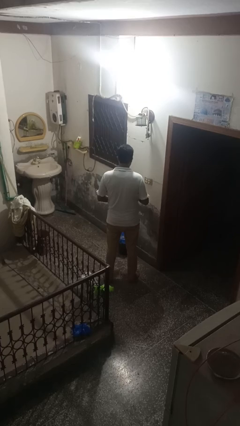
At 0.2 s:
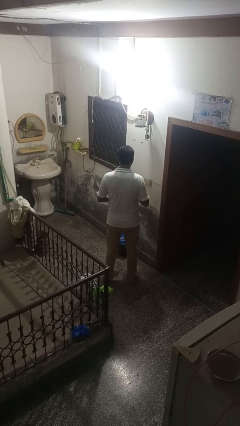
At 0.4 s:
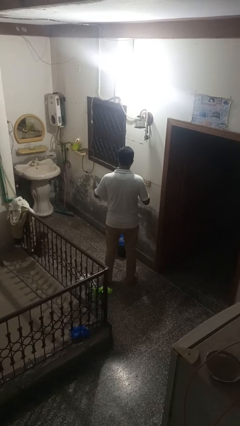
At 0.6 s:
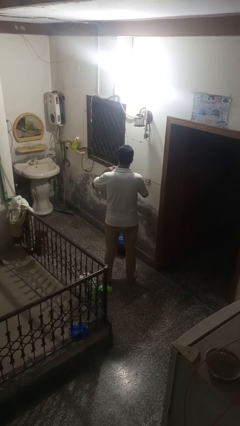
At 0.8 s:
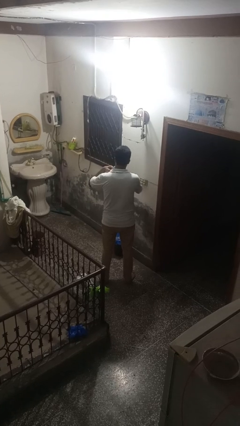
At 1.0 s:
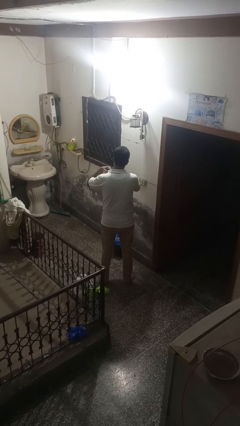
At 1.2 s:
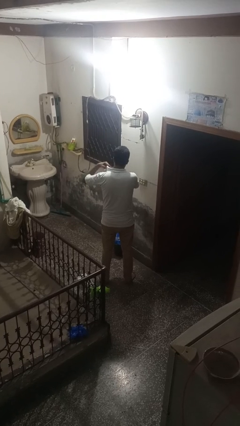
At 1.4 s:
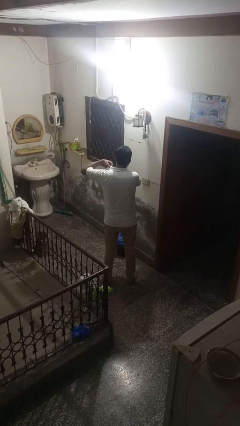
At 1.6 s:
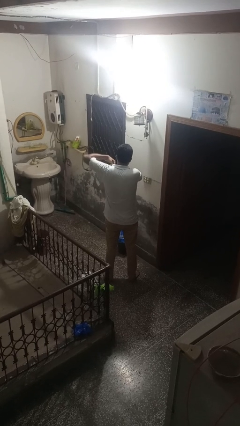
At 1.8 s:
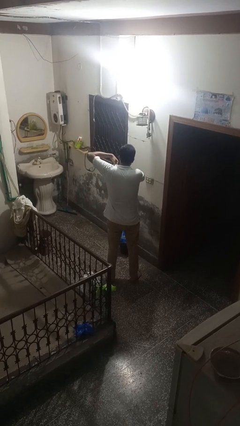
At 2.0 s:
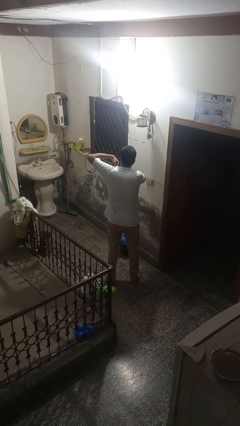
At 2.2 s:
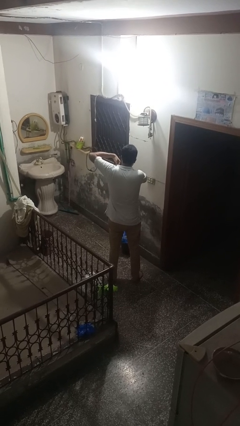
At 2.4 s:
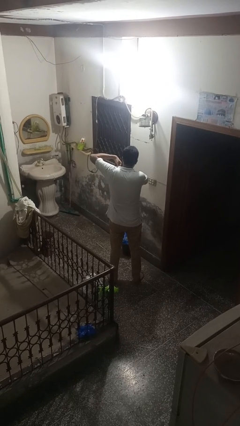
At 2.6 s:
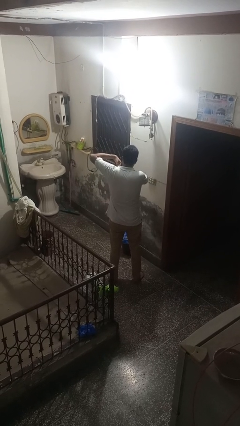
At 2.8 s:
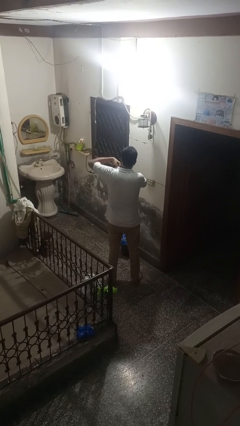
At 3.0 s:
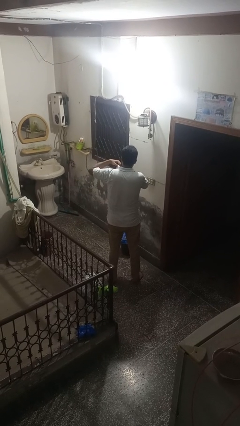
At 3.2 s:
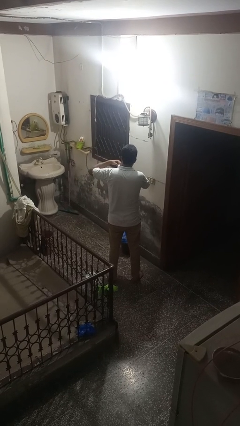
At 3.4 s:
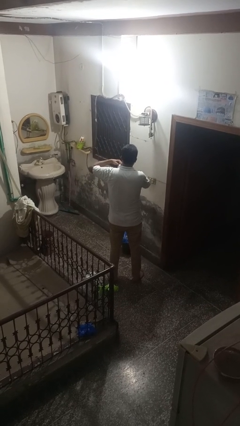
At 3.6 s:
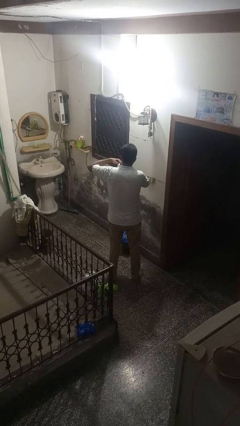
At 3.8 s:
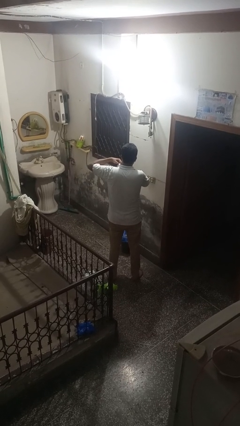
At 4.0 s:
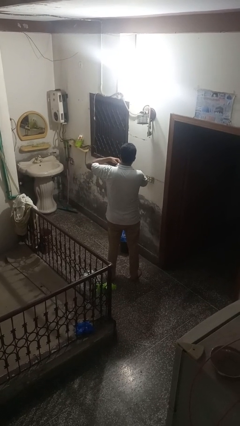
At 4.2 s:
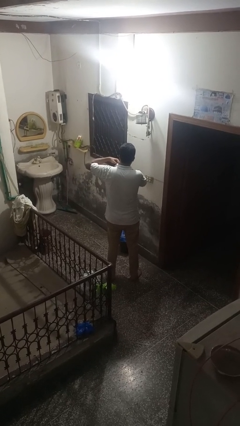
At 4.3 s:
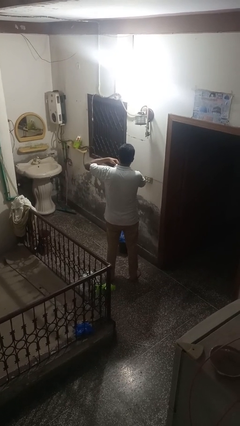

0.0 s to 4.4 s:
person applies deodorant

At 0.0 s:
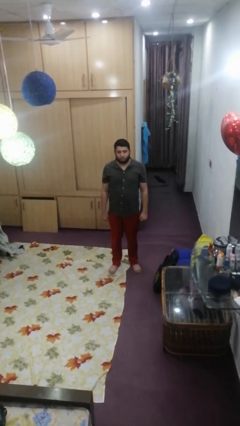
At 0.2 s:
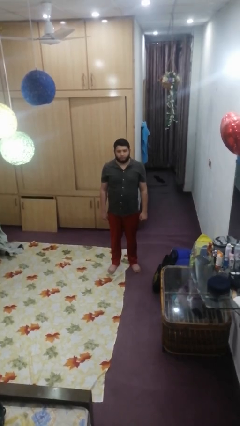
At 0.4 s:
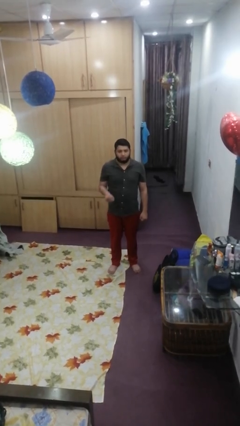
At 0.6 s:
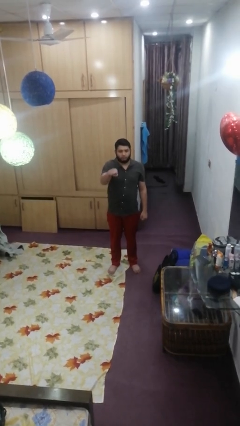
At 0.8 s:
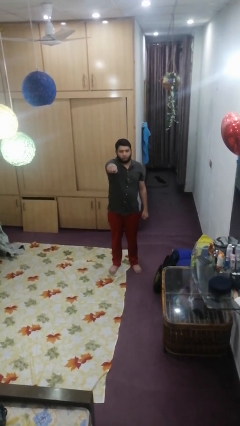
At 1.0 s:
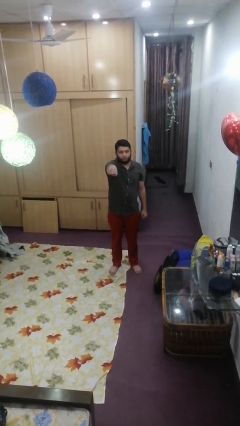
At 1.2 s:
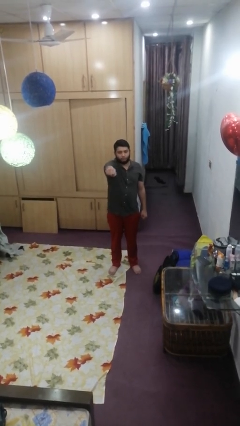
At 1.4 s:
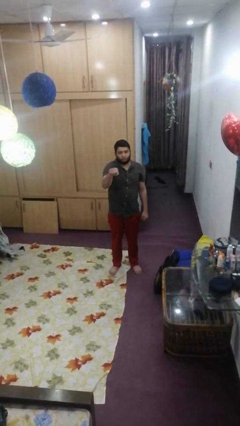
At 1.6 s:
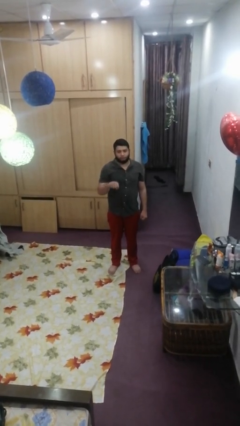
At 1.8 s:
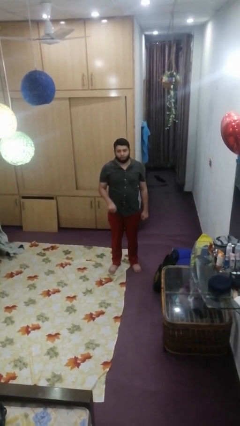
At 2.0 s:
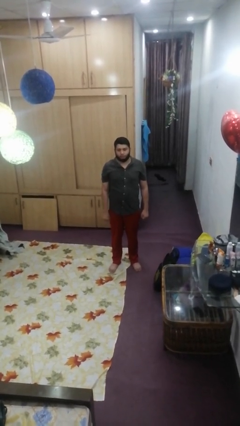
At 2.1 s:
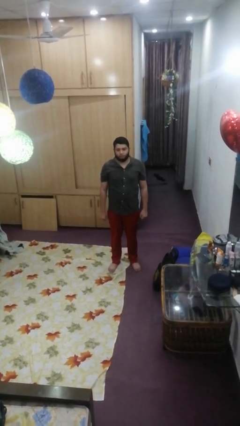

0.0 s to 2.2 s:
person punches

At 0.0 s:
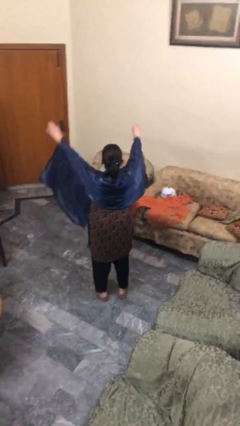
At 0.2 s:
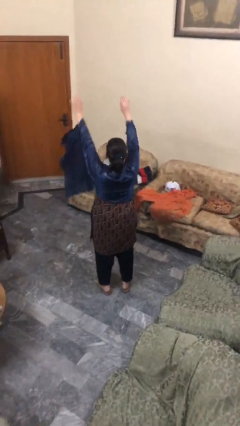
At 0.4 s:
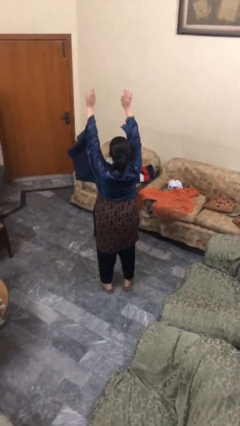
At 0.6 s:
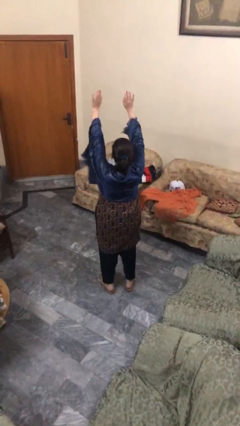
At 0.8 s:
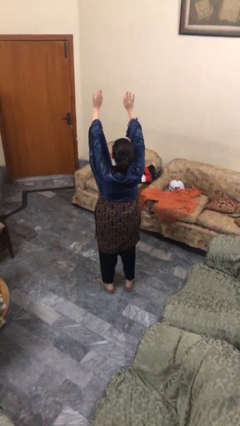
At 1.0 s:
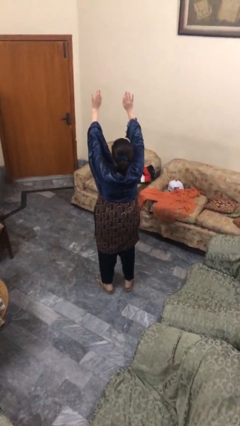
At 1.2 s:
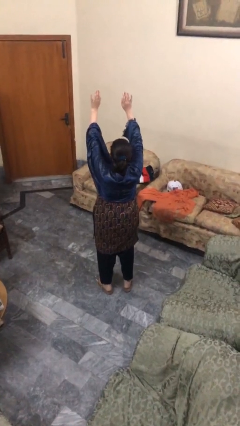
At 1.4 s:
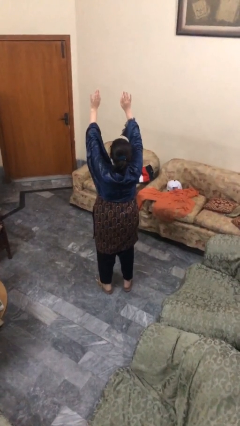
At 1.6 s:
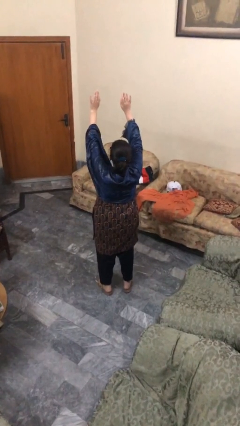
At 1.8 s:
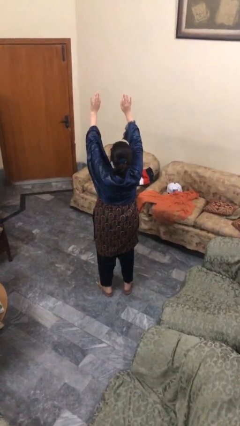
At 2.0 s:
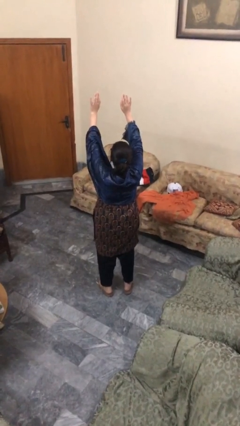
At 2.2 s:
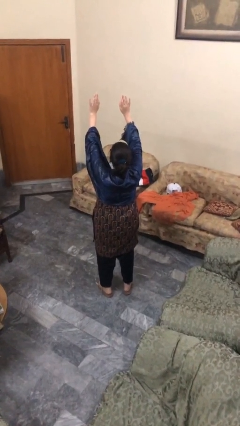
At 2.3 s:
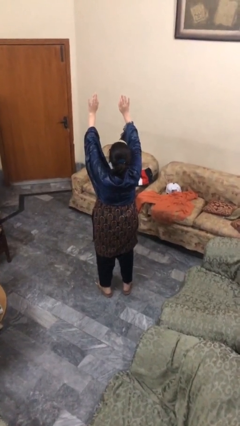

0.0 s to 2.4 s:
person stretches arms over head

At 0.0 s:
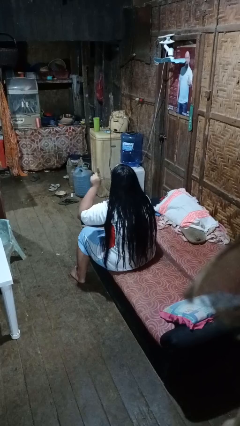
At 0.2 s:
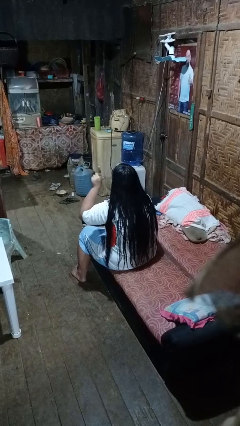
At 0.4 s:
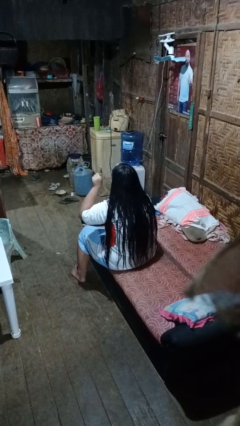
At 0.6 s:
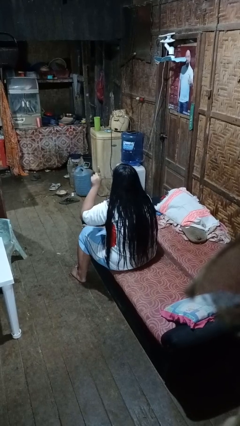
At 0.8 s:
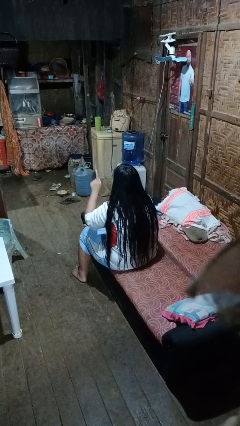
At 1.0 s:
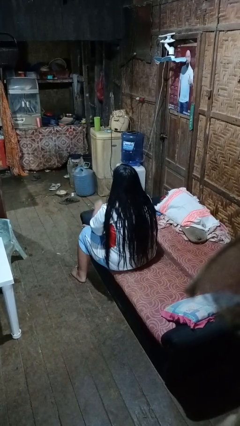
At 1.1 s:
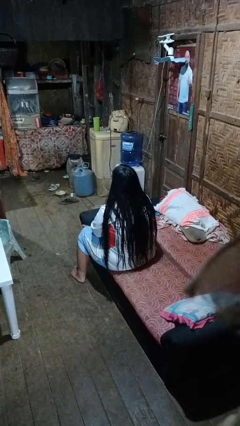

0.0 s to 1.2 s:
person gestures number one

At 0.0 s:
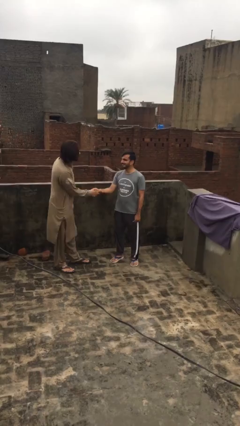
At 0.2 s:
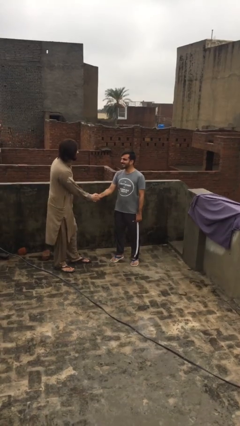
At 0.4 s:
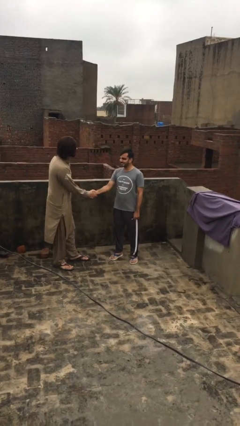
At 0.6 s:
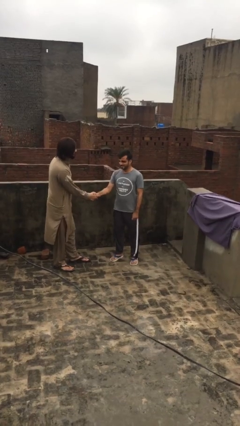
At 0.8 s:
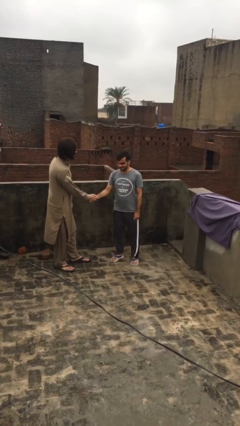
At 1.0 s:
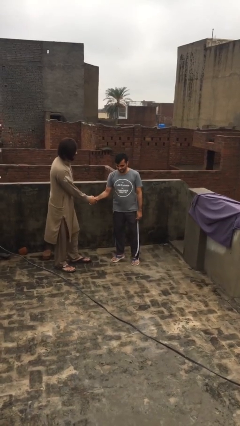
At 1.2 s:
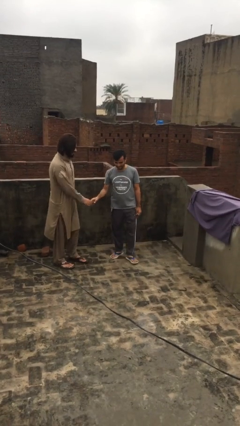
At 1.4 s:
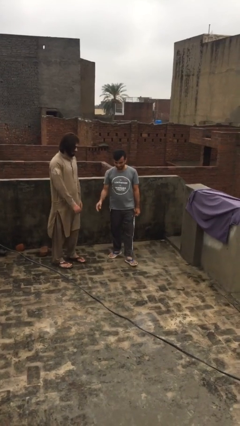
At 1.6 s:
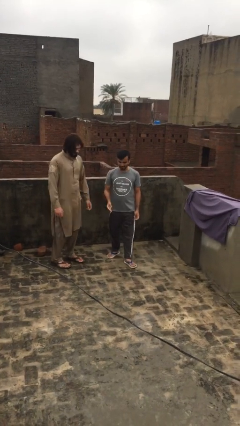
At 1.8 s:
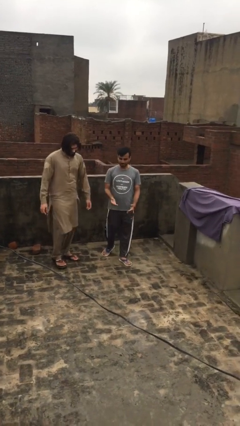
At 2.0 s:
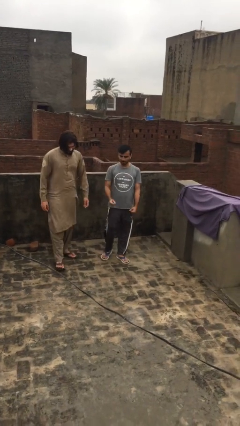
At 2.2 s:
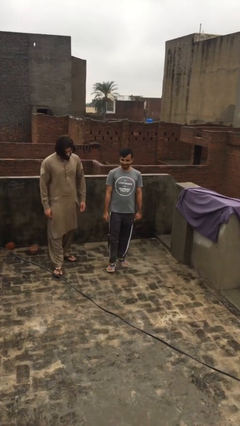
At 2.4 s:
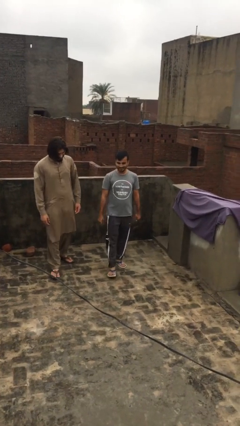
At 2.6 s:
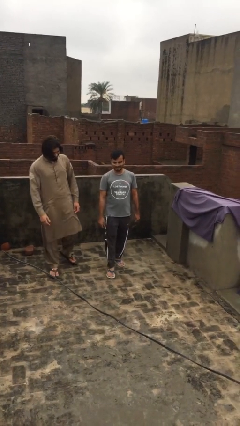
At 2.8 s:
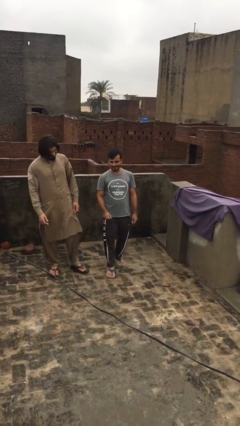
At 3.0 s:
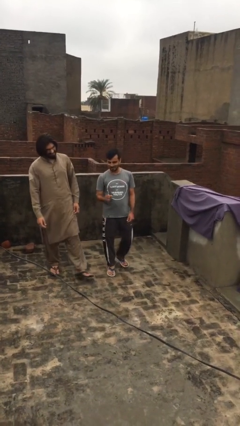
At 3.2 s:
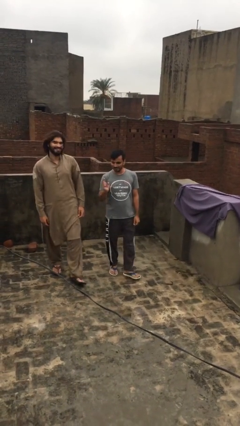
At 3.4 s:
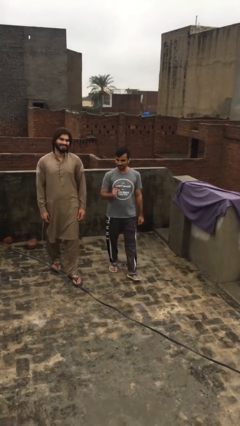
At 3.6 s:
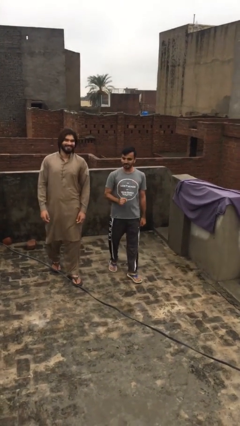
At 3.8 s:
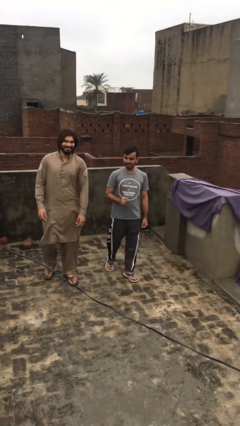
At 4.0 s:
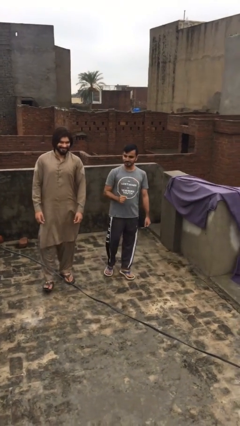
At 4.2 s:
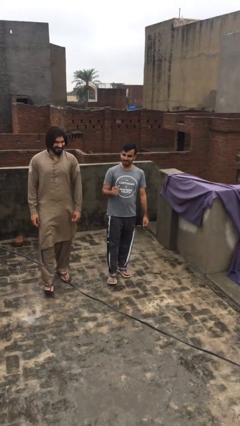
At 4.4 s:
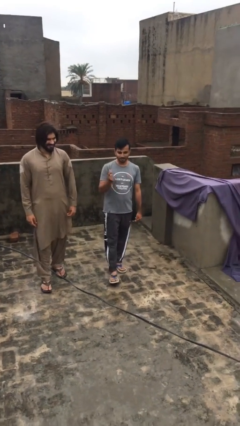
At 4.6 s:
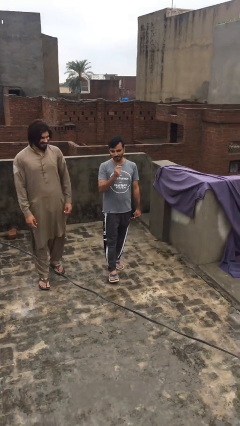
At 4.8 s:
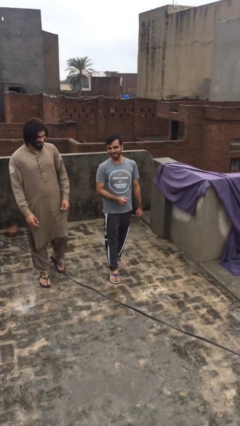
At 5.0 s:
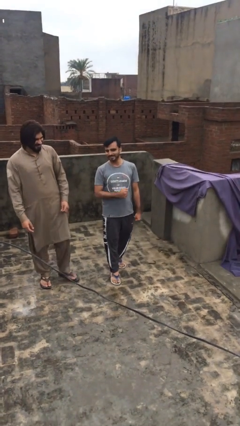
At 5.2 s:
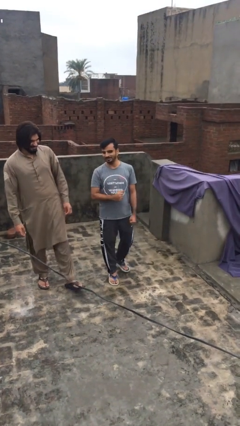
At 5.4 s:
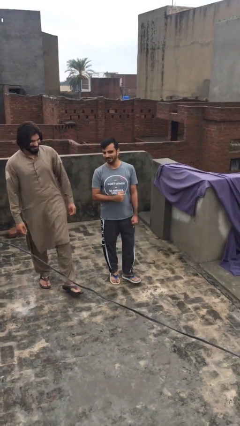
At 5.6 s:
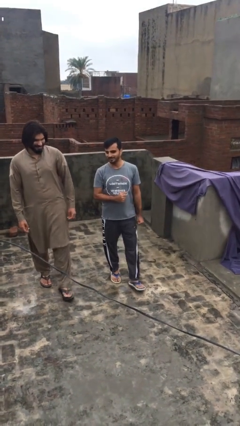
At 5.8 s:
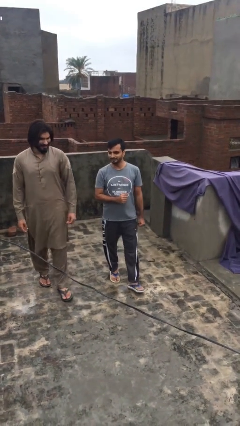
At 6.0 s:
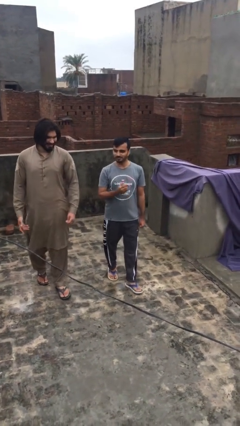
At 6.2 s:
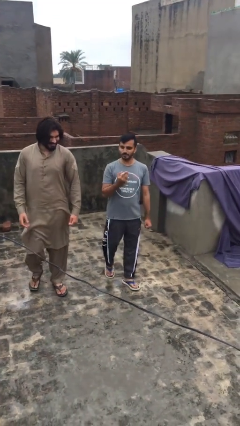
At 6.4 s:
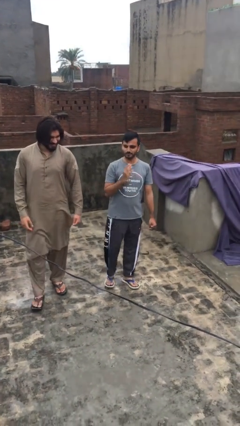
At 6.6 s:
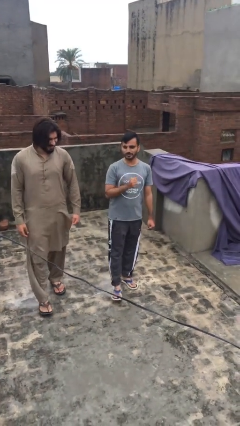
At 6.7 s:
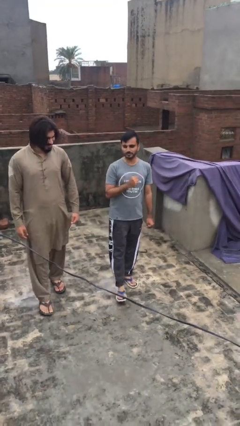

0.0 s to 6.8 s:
person talks to person

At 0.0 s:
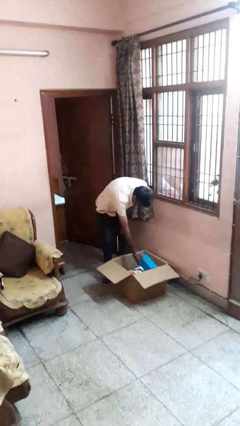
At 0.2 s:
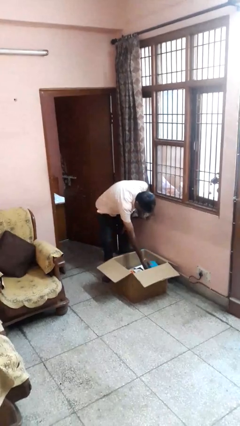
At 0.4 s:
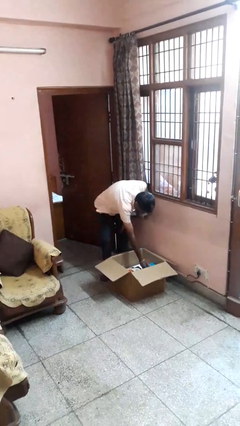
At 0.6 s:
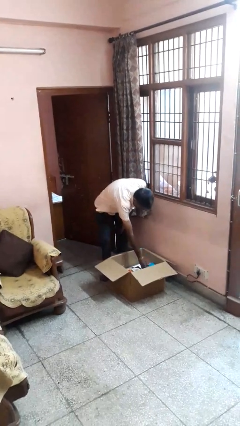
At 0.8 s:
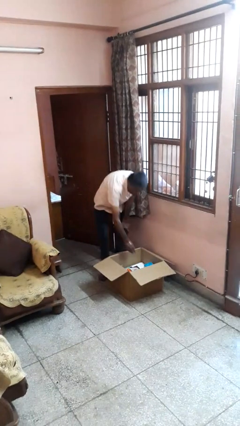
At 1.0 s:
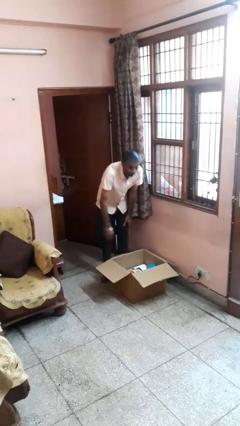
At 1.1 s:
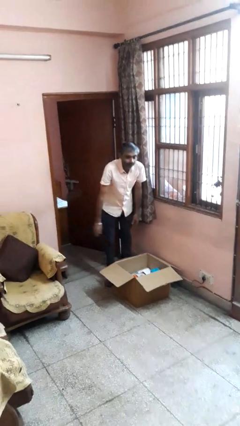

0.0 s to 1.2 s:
person puts object into box
